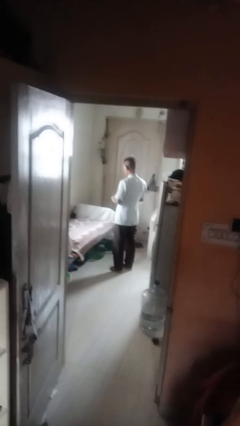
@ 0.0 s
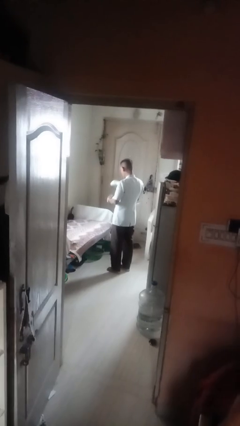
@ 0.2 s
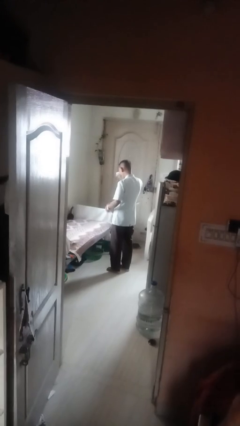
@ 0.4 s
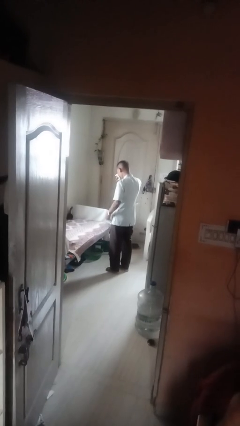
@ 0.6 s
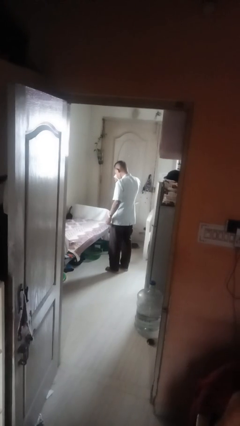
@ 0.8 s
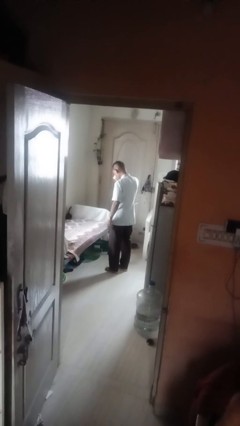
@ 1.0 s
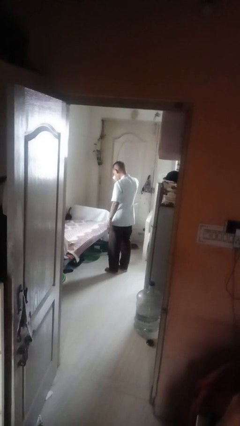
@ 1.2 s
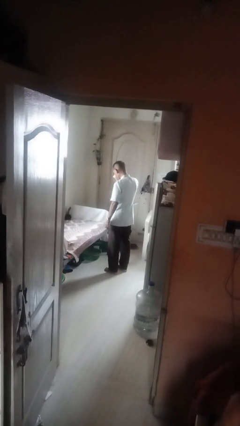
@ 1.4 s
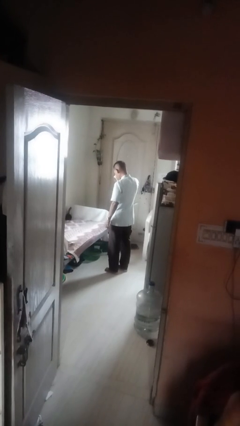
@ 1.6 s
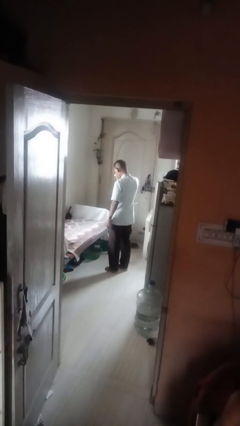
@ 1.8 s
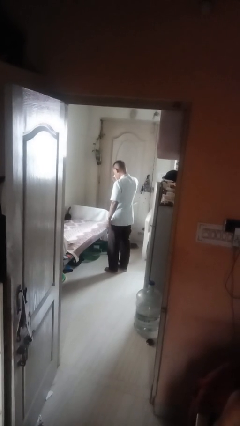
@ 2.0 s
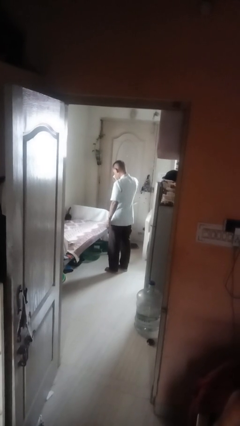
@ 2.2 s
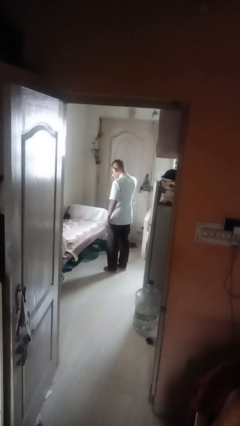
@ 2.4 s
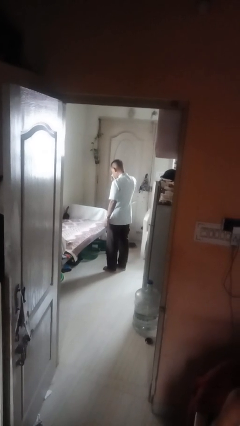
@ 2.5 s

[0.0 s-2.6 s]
person blows nose

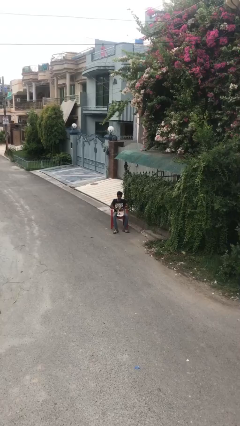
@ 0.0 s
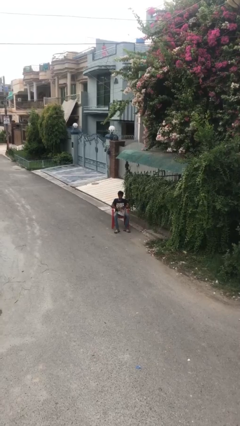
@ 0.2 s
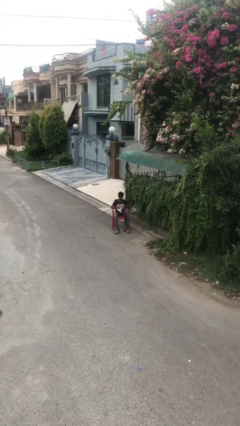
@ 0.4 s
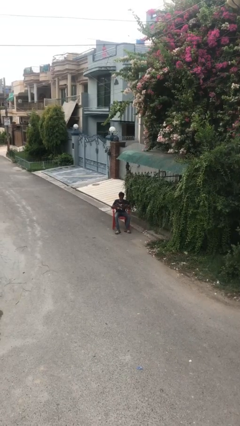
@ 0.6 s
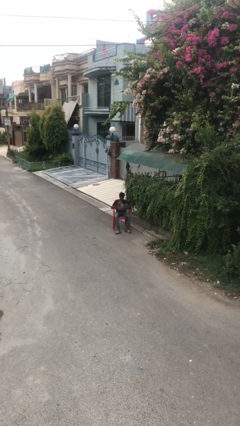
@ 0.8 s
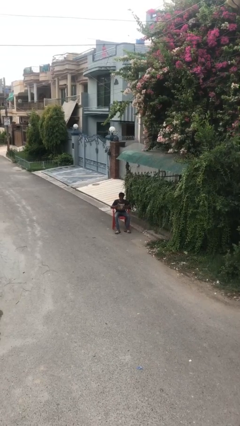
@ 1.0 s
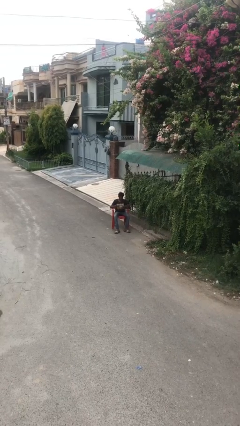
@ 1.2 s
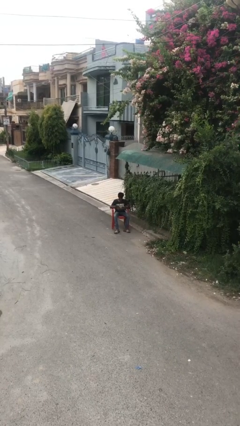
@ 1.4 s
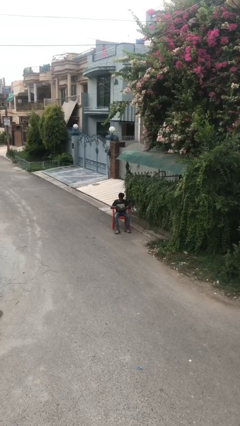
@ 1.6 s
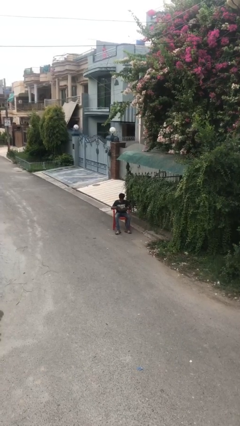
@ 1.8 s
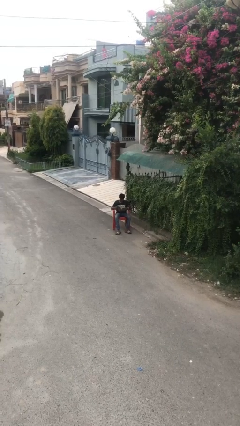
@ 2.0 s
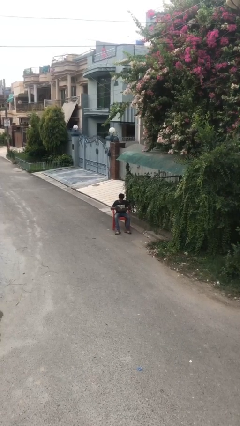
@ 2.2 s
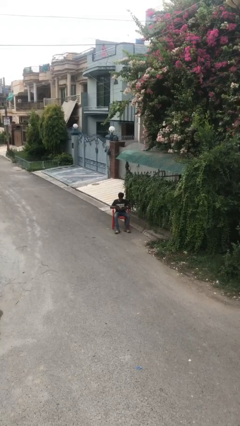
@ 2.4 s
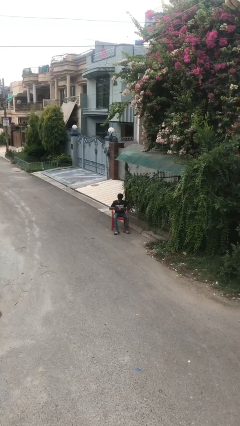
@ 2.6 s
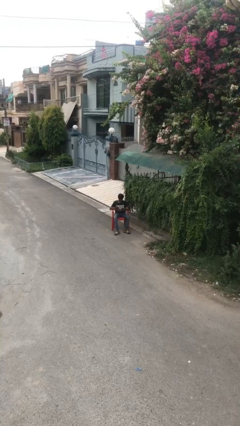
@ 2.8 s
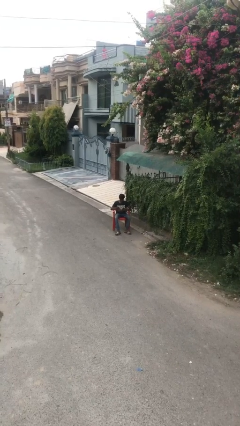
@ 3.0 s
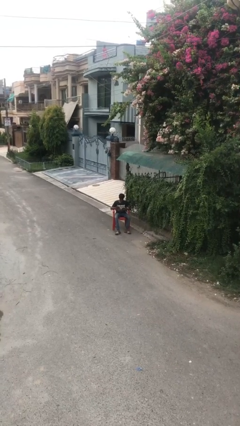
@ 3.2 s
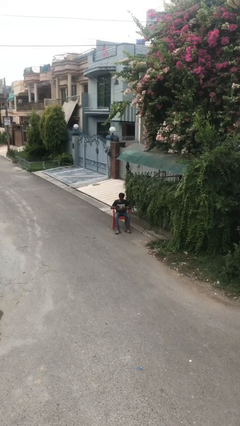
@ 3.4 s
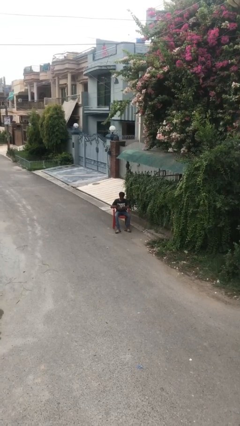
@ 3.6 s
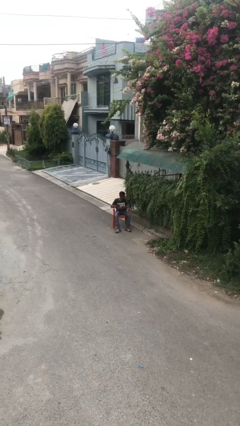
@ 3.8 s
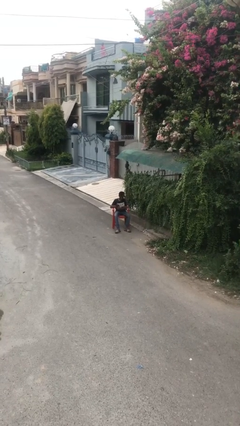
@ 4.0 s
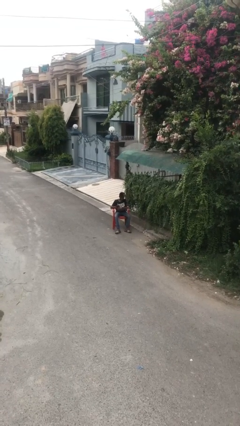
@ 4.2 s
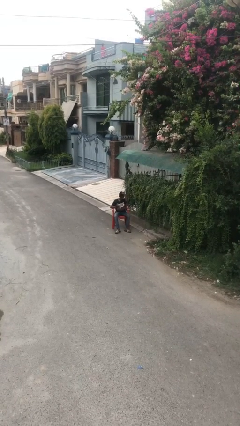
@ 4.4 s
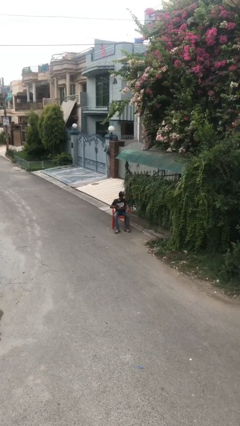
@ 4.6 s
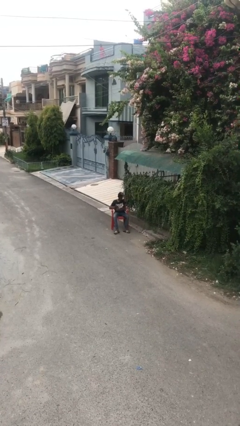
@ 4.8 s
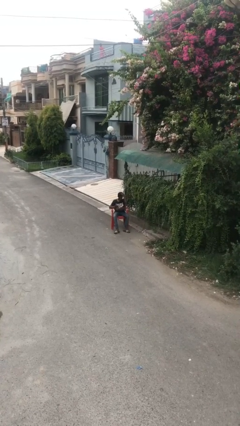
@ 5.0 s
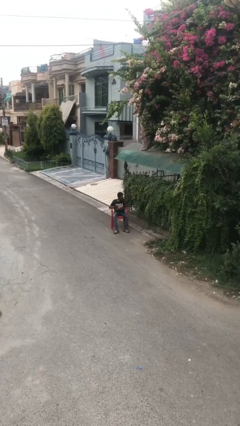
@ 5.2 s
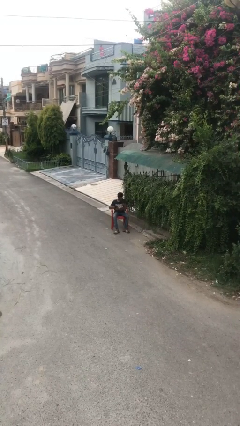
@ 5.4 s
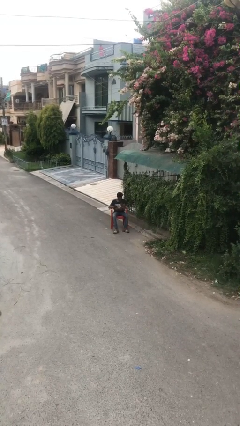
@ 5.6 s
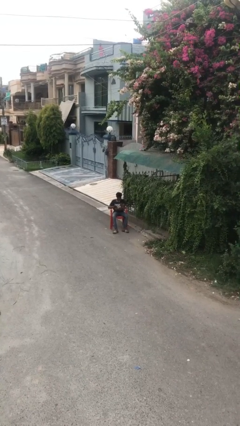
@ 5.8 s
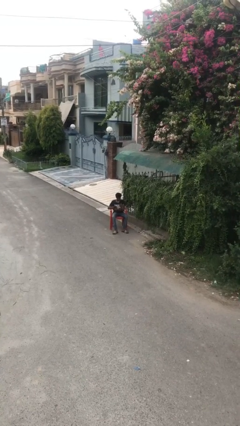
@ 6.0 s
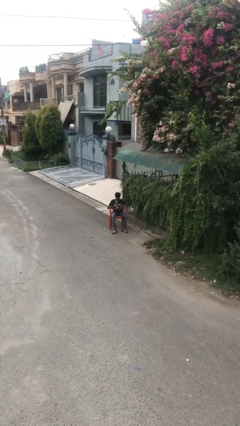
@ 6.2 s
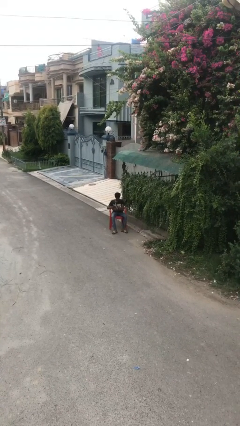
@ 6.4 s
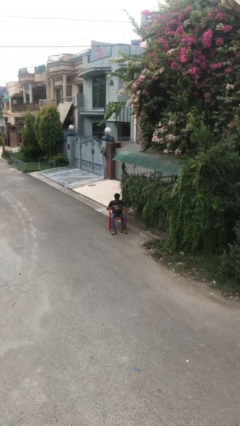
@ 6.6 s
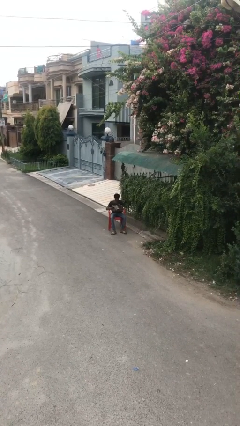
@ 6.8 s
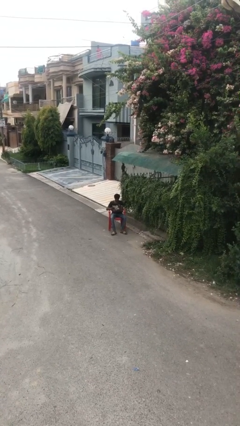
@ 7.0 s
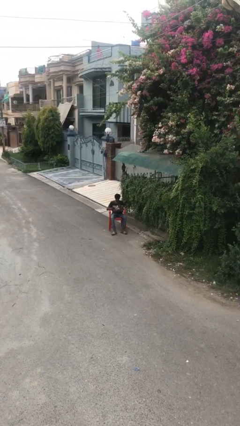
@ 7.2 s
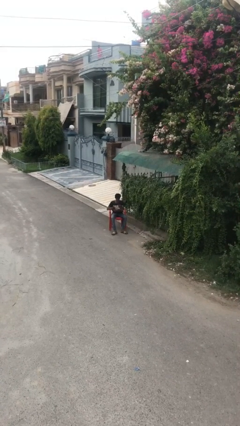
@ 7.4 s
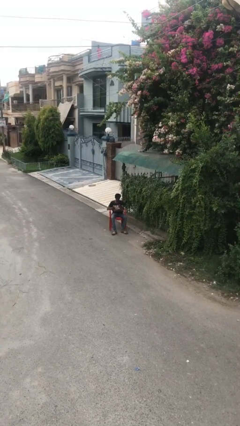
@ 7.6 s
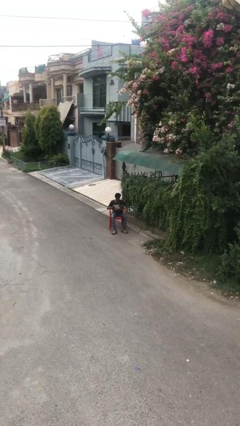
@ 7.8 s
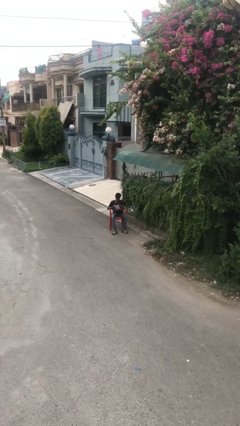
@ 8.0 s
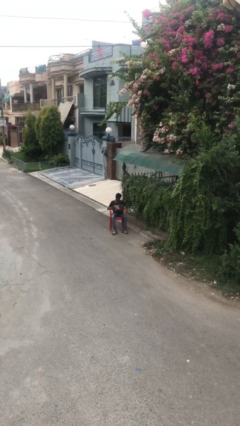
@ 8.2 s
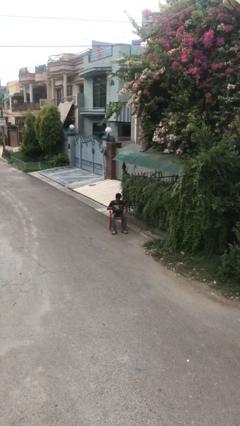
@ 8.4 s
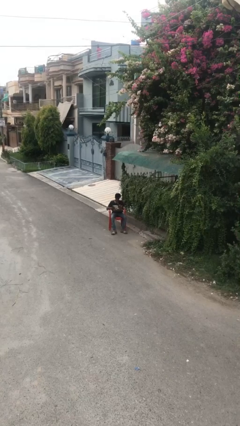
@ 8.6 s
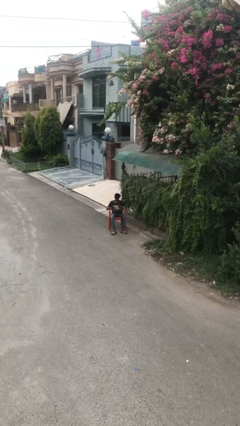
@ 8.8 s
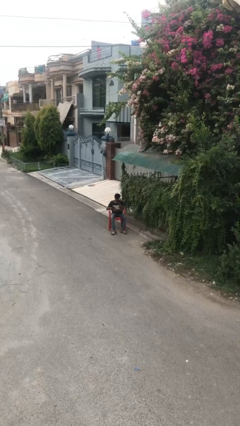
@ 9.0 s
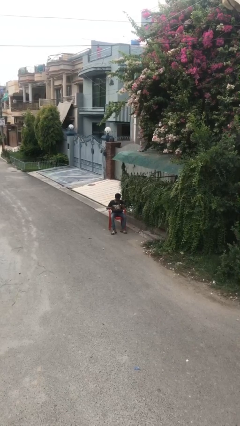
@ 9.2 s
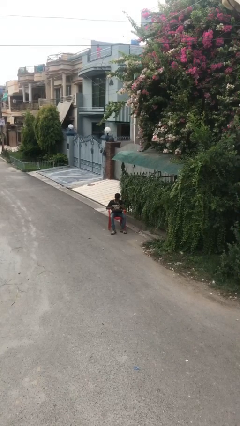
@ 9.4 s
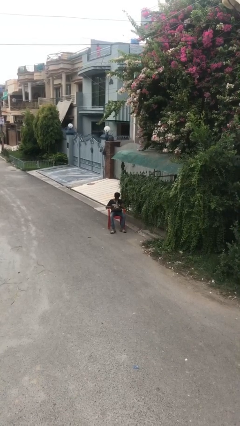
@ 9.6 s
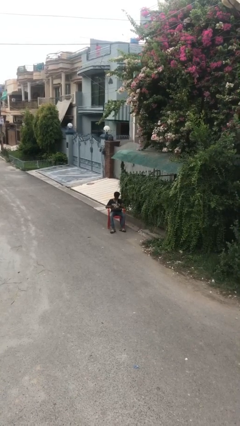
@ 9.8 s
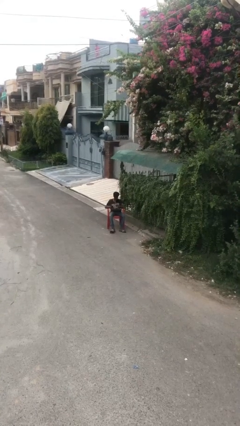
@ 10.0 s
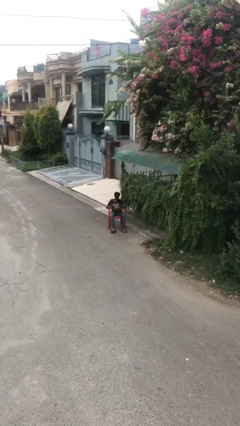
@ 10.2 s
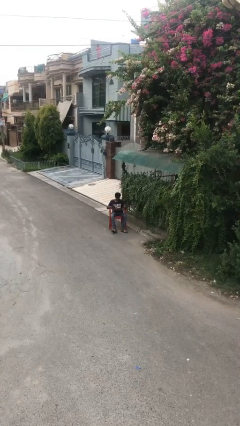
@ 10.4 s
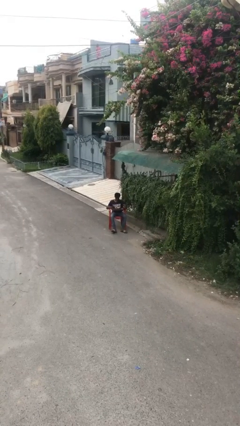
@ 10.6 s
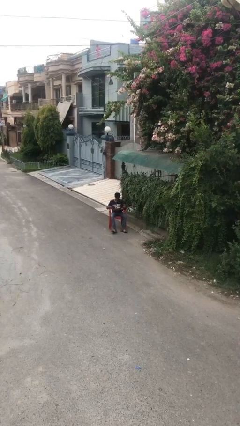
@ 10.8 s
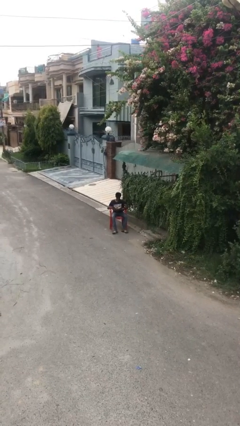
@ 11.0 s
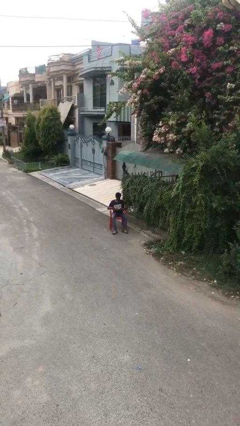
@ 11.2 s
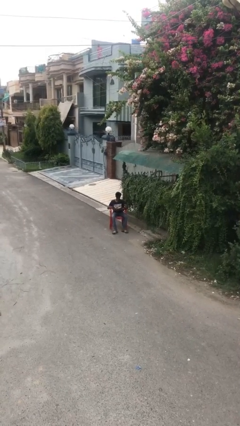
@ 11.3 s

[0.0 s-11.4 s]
person reads document

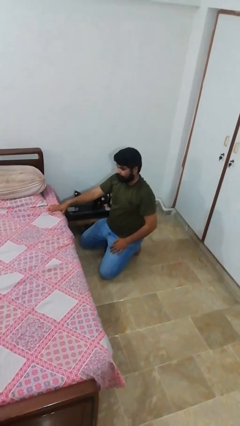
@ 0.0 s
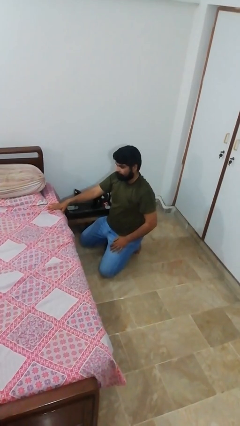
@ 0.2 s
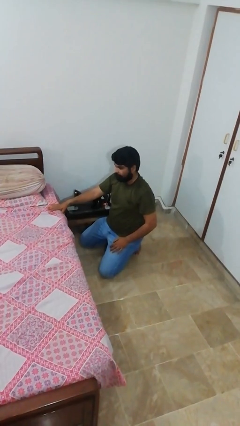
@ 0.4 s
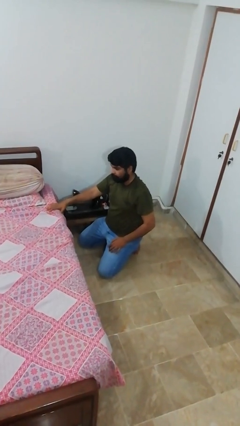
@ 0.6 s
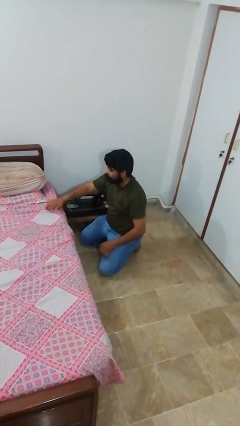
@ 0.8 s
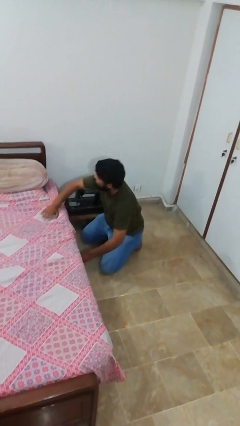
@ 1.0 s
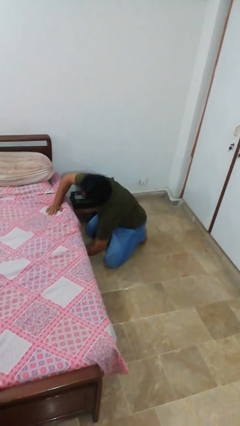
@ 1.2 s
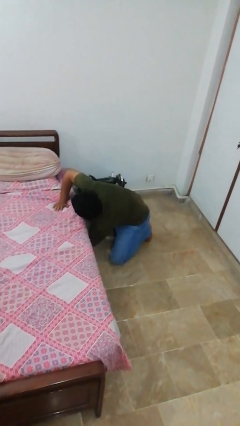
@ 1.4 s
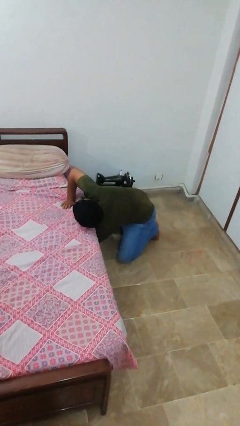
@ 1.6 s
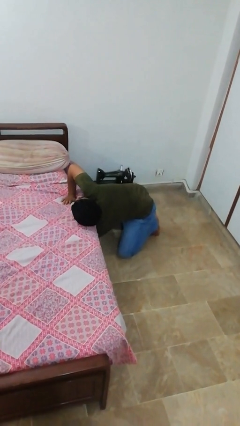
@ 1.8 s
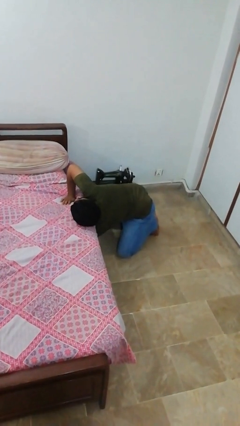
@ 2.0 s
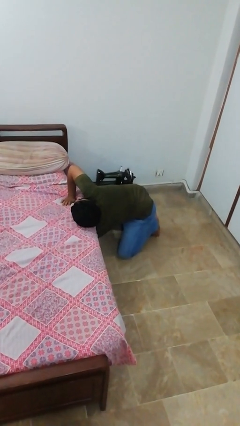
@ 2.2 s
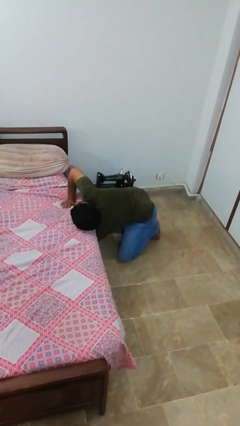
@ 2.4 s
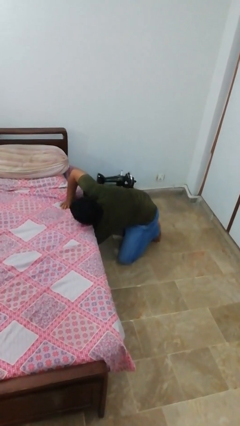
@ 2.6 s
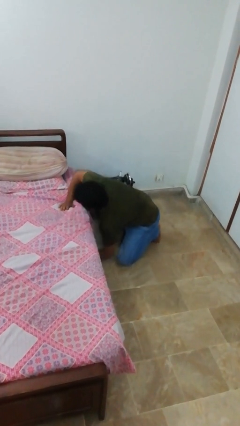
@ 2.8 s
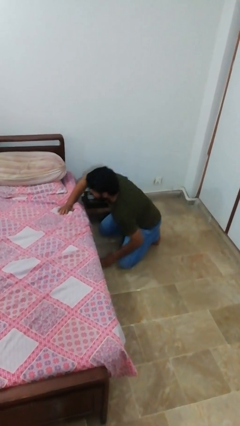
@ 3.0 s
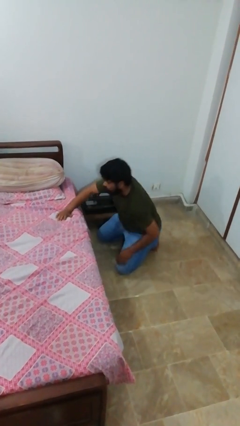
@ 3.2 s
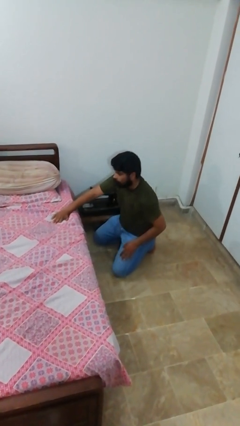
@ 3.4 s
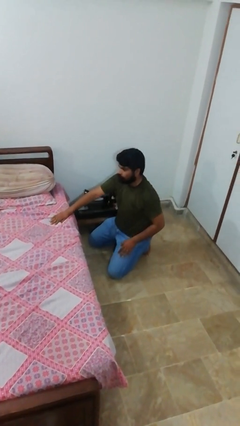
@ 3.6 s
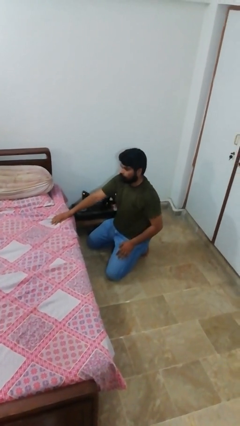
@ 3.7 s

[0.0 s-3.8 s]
person searches under bed
